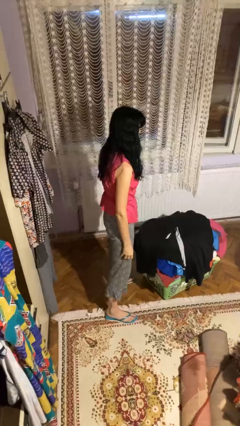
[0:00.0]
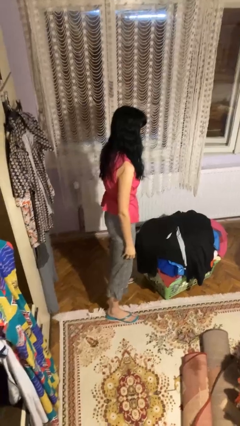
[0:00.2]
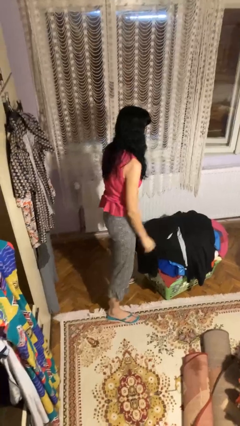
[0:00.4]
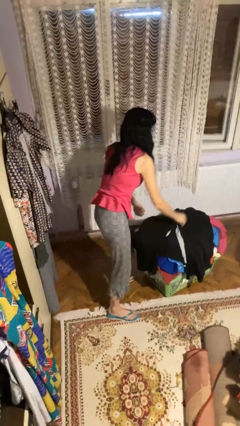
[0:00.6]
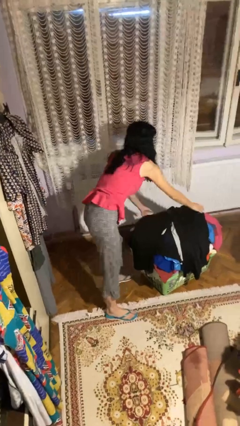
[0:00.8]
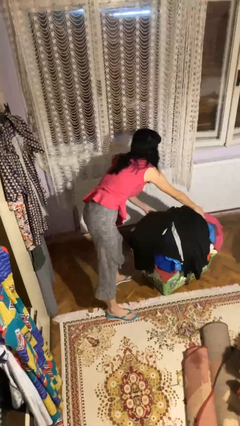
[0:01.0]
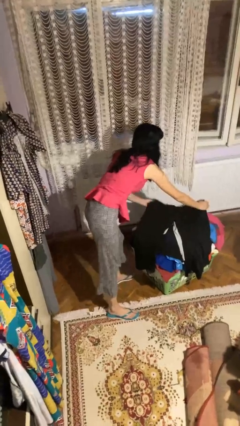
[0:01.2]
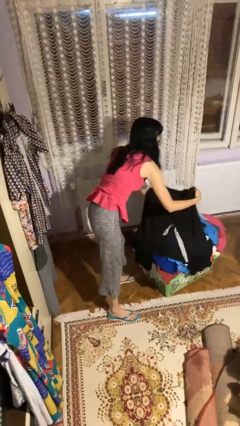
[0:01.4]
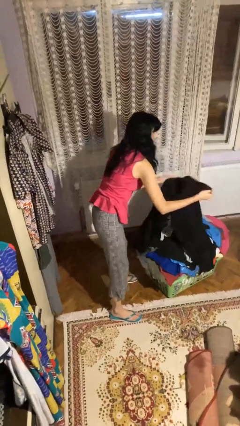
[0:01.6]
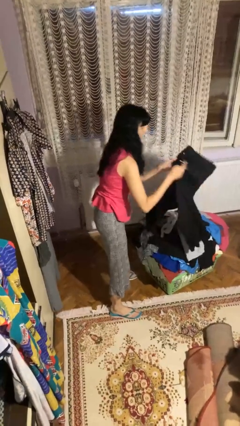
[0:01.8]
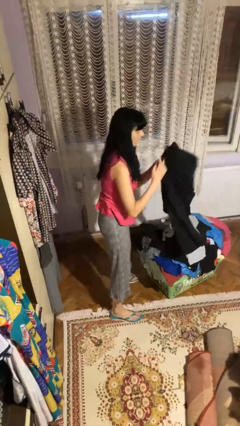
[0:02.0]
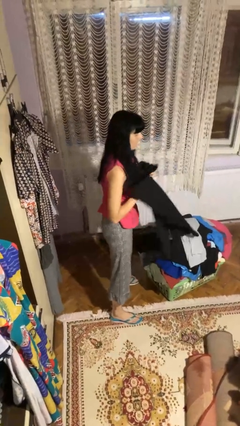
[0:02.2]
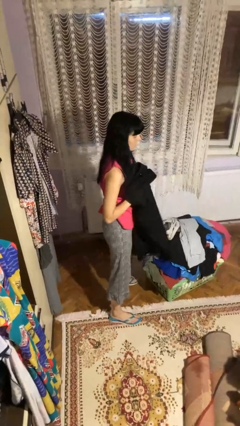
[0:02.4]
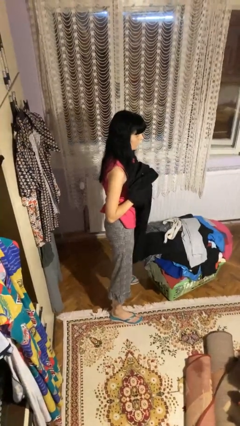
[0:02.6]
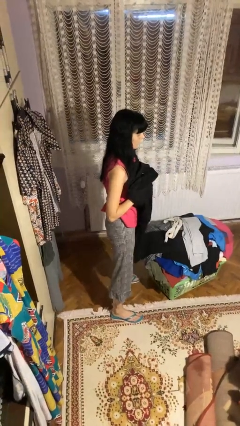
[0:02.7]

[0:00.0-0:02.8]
person folds pants

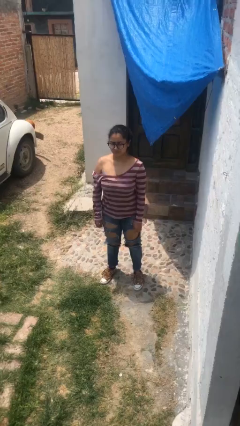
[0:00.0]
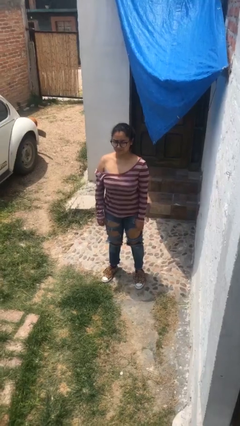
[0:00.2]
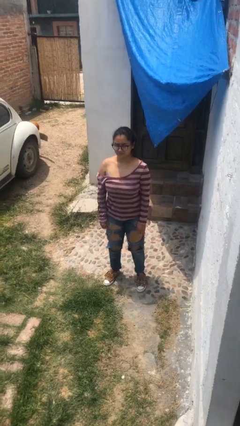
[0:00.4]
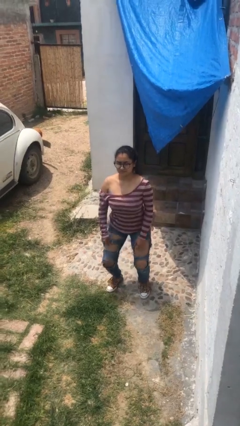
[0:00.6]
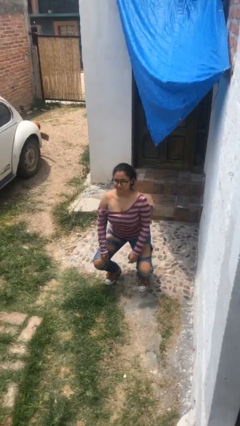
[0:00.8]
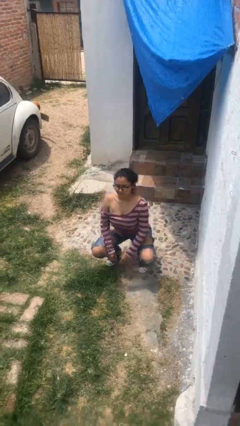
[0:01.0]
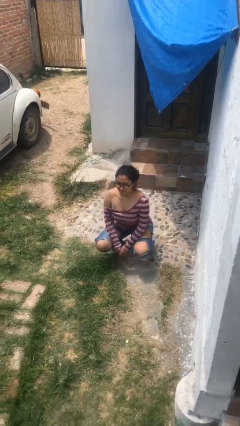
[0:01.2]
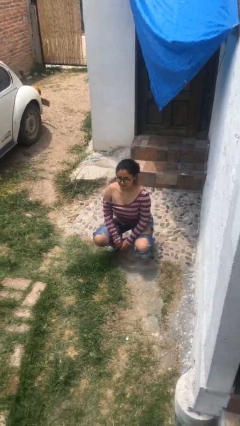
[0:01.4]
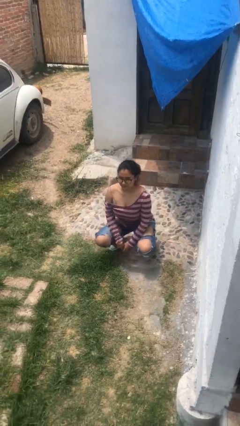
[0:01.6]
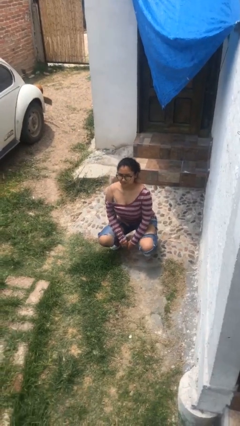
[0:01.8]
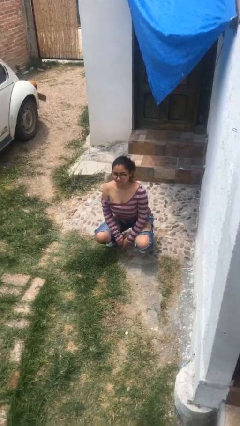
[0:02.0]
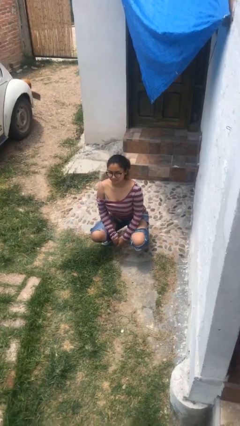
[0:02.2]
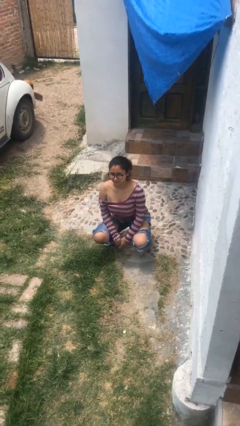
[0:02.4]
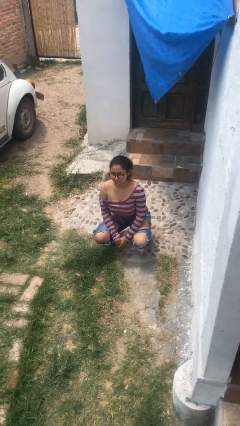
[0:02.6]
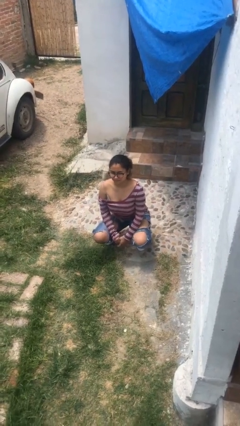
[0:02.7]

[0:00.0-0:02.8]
person squats

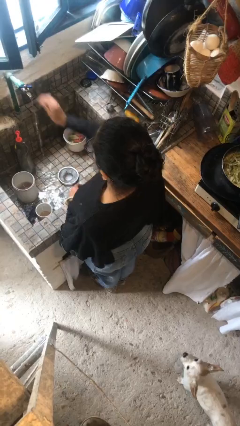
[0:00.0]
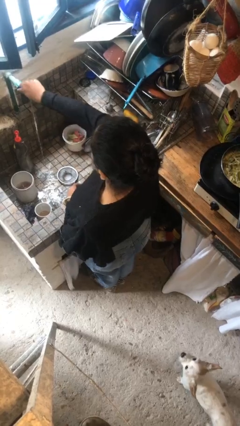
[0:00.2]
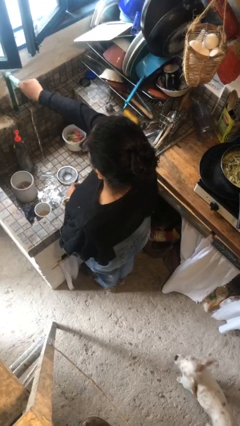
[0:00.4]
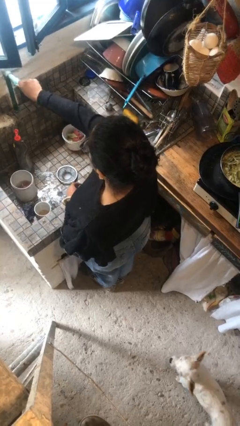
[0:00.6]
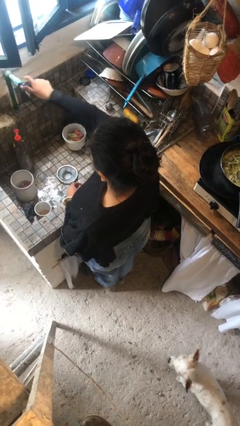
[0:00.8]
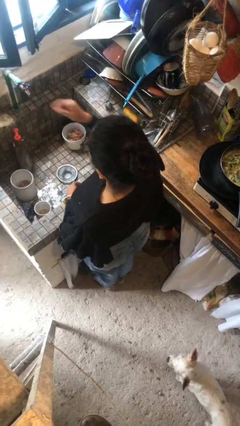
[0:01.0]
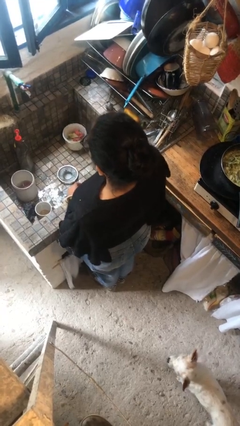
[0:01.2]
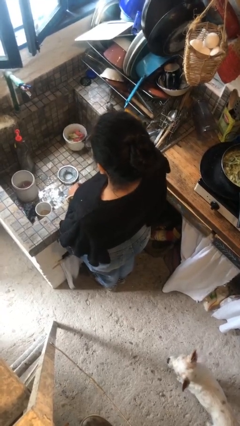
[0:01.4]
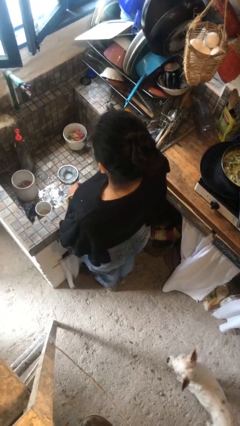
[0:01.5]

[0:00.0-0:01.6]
person turns off faucet

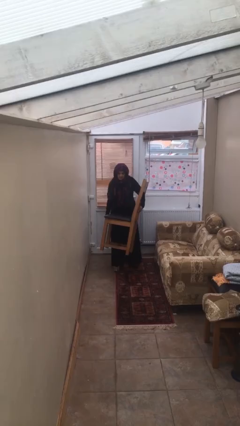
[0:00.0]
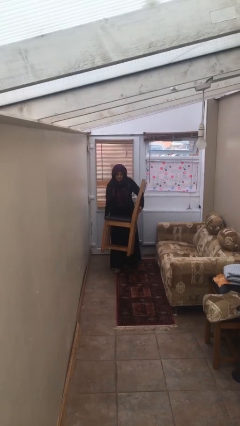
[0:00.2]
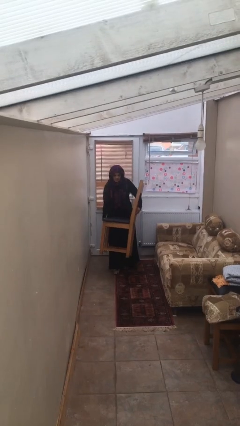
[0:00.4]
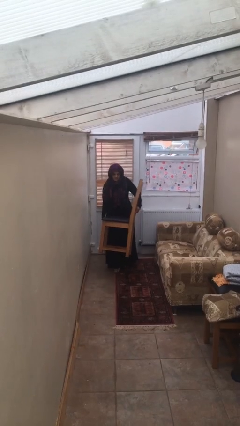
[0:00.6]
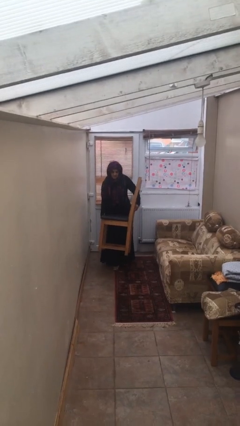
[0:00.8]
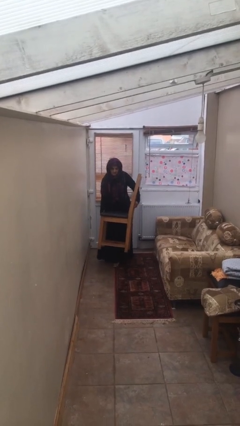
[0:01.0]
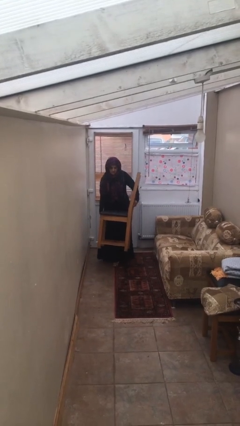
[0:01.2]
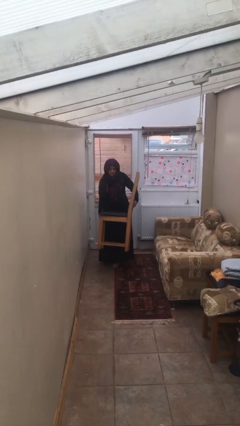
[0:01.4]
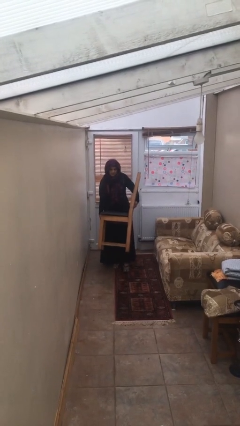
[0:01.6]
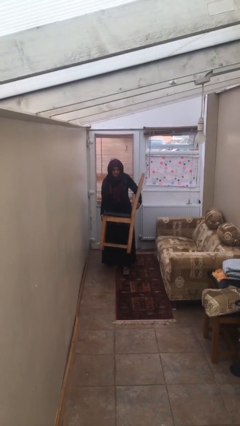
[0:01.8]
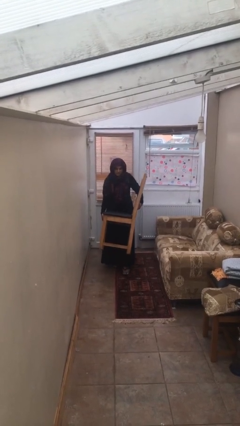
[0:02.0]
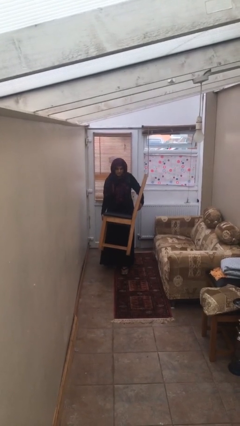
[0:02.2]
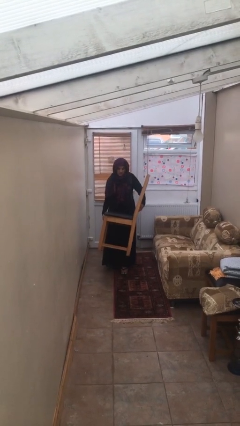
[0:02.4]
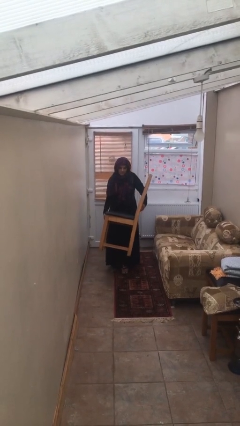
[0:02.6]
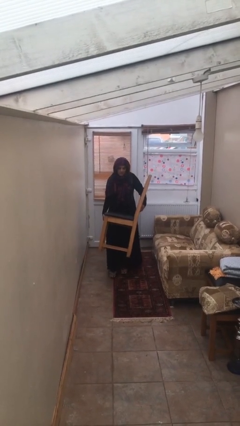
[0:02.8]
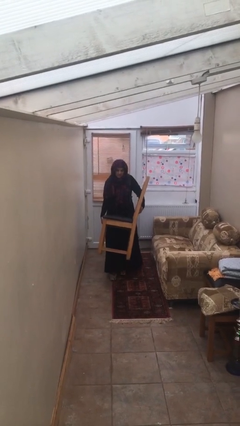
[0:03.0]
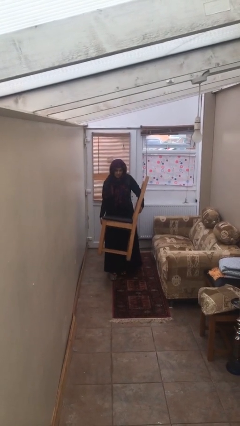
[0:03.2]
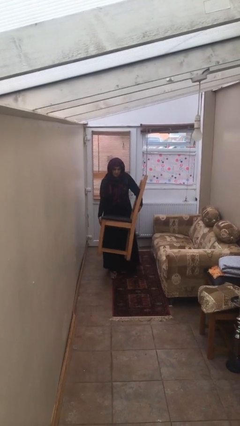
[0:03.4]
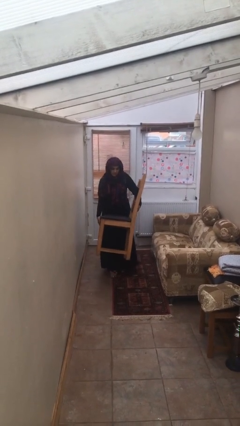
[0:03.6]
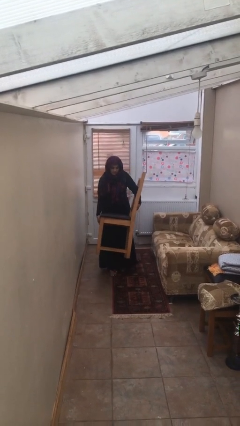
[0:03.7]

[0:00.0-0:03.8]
person carries heavy object

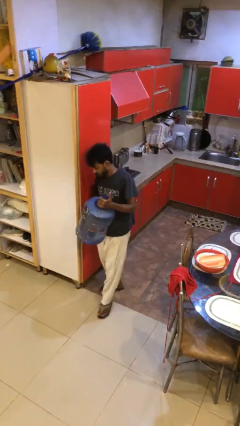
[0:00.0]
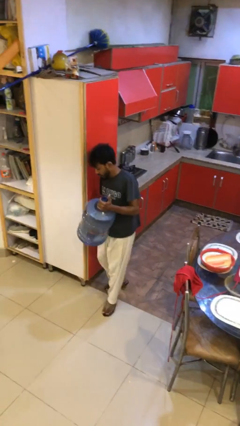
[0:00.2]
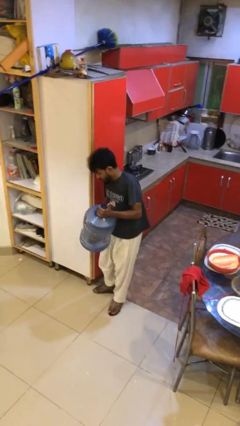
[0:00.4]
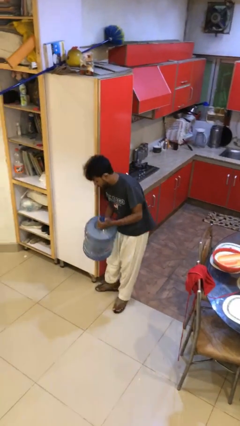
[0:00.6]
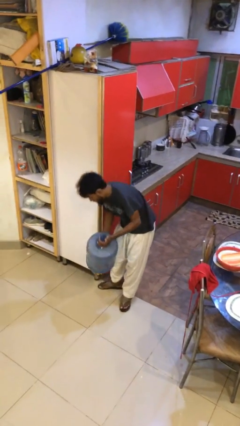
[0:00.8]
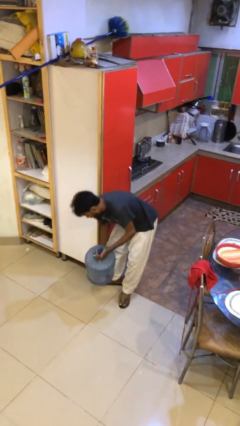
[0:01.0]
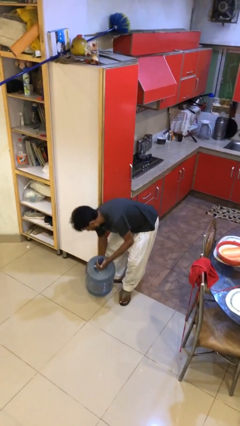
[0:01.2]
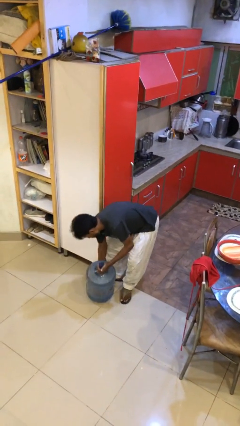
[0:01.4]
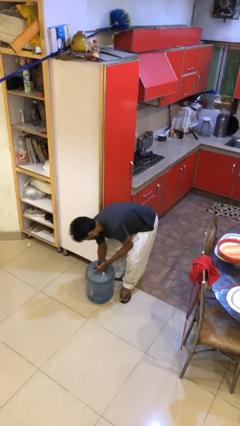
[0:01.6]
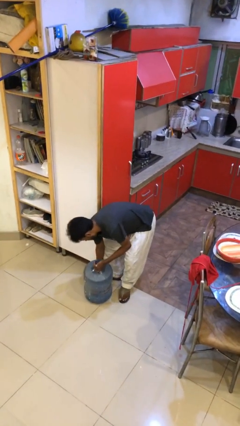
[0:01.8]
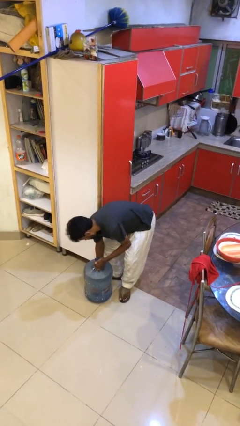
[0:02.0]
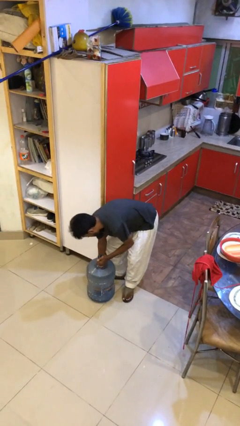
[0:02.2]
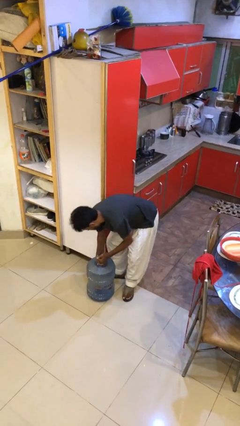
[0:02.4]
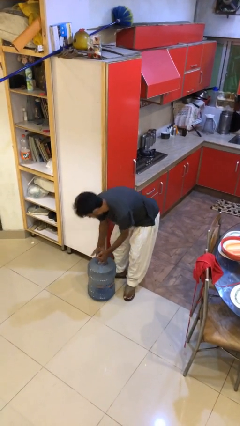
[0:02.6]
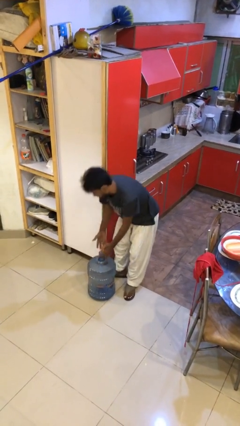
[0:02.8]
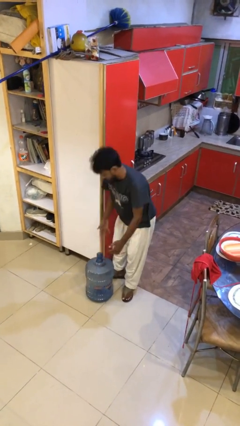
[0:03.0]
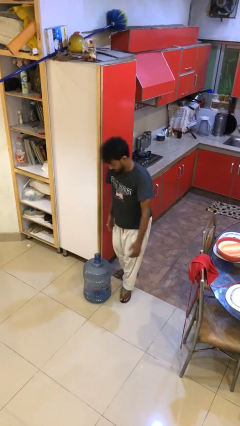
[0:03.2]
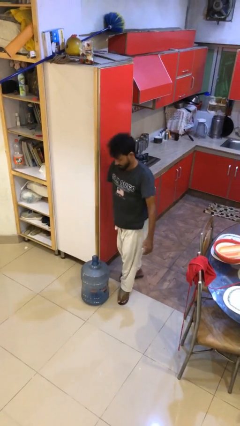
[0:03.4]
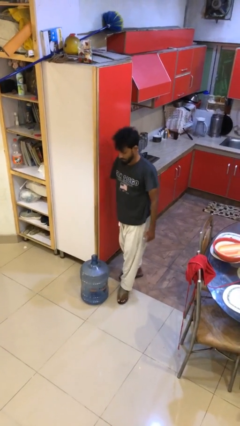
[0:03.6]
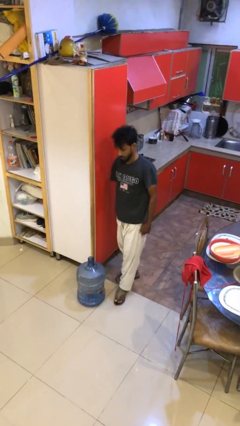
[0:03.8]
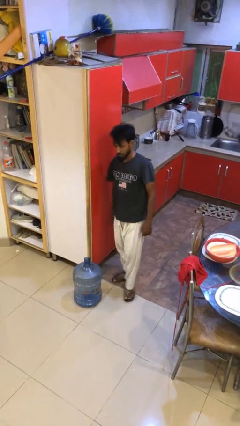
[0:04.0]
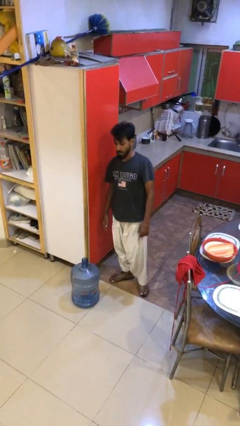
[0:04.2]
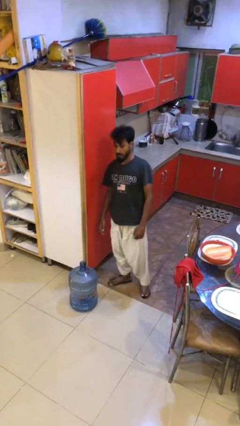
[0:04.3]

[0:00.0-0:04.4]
person puts down object on floor

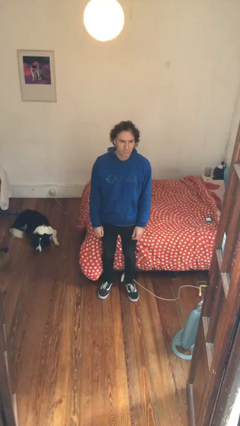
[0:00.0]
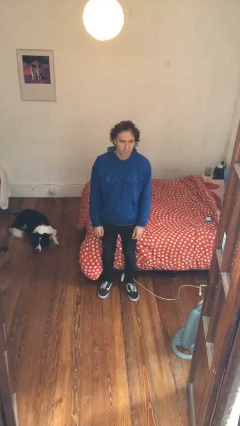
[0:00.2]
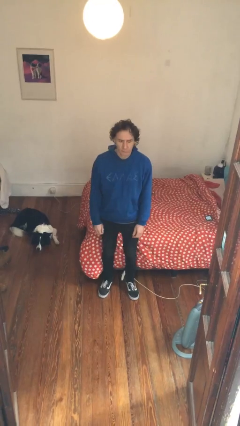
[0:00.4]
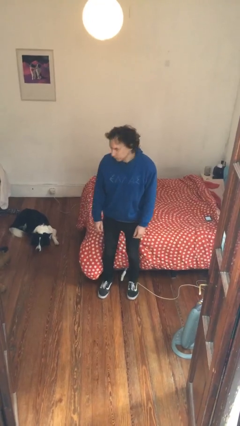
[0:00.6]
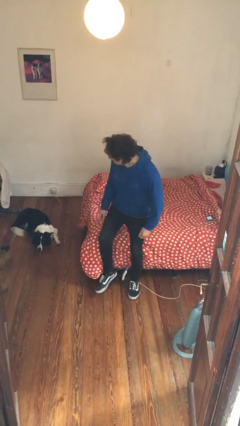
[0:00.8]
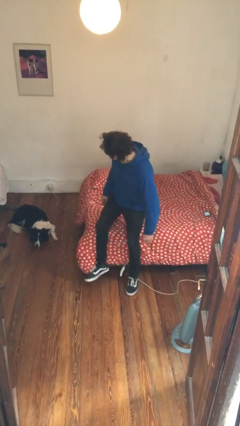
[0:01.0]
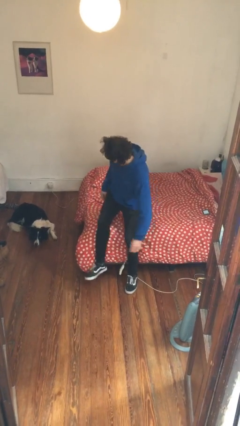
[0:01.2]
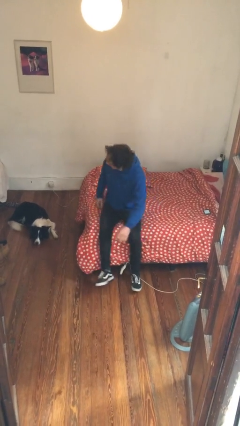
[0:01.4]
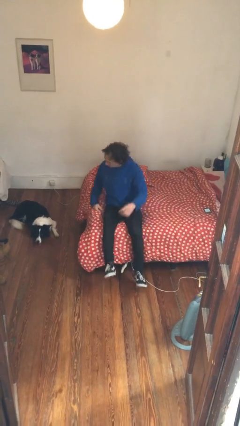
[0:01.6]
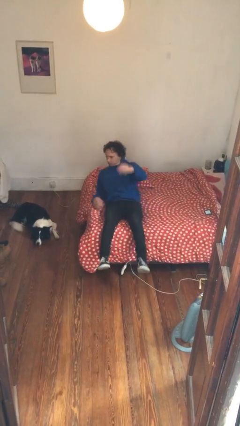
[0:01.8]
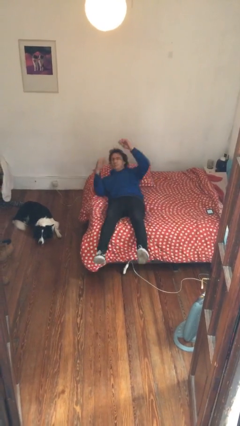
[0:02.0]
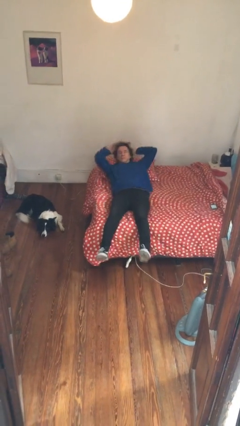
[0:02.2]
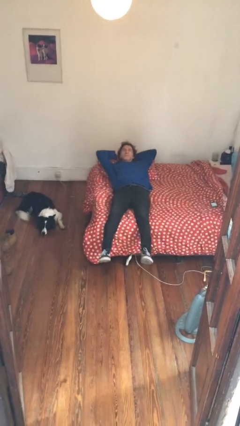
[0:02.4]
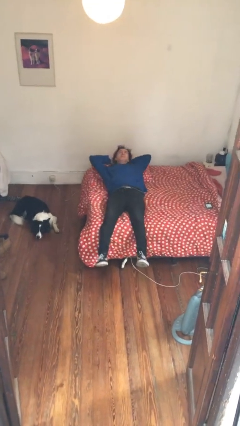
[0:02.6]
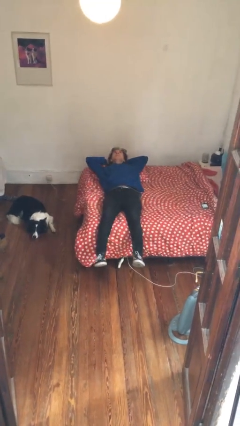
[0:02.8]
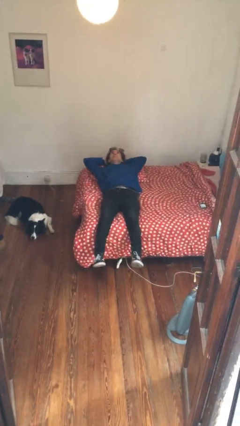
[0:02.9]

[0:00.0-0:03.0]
person lies down on bed
